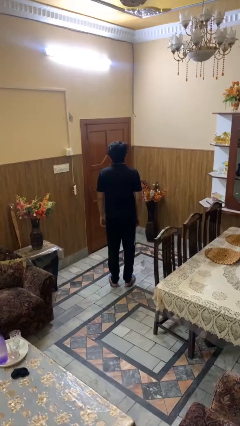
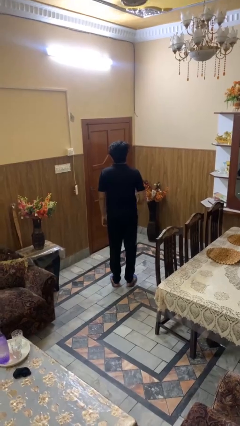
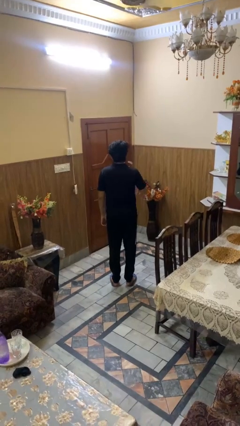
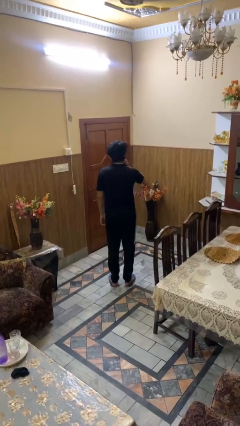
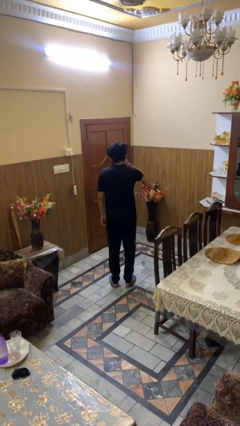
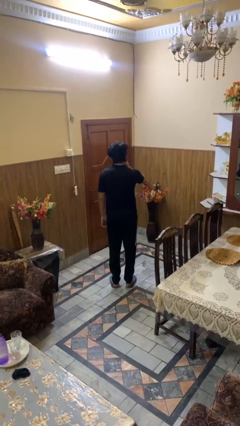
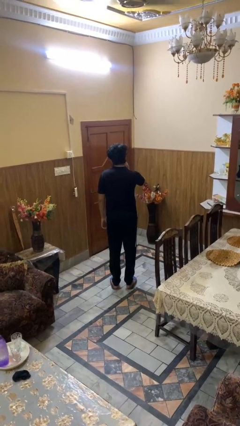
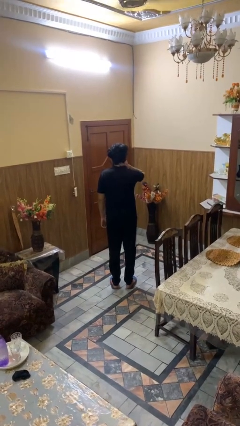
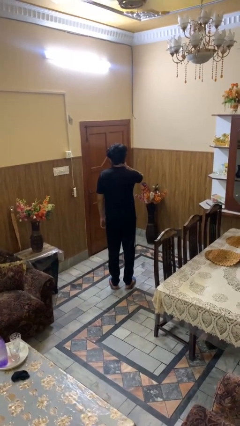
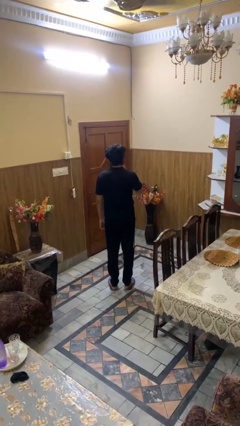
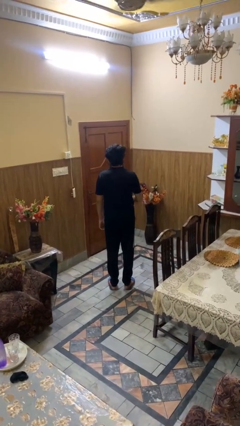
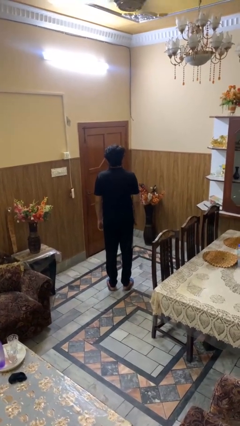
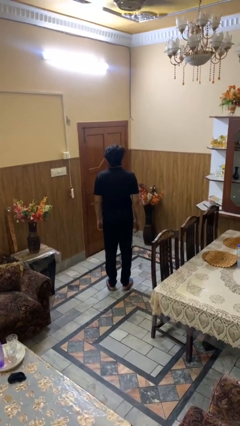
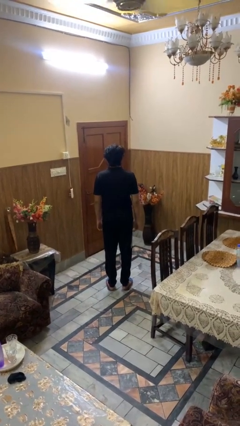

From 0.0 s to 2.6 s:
person rubs neck

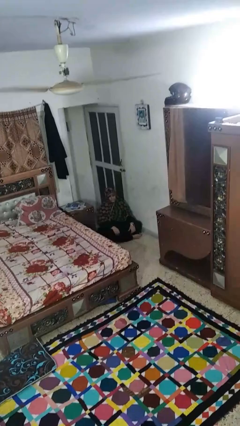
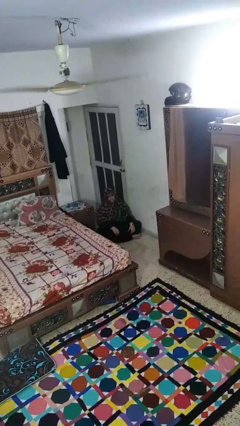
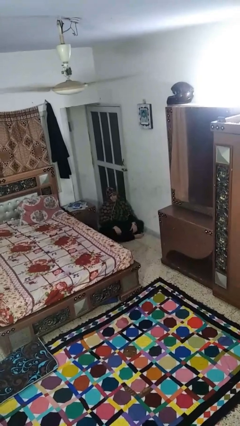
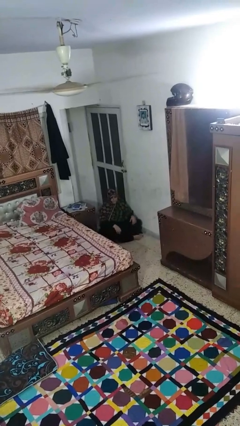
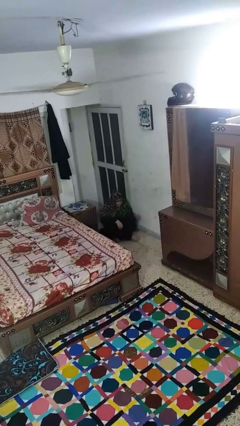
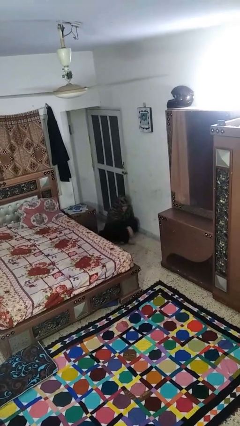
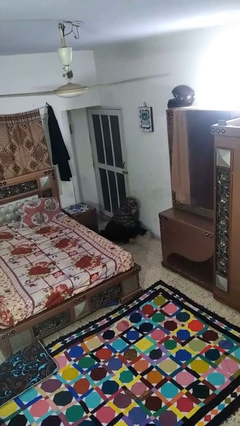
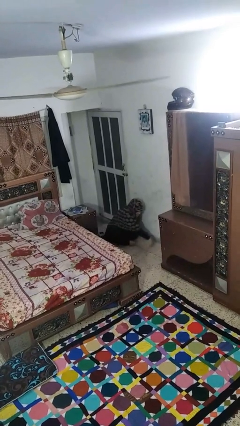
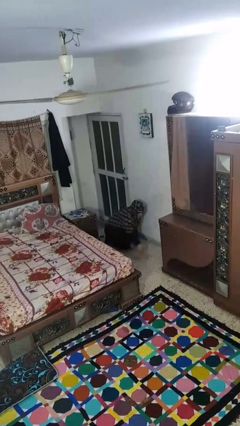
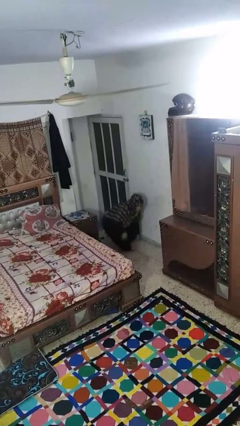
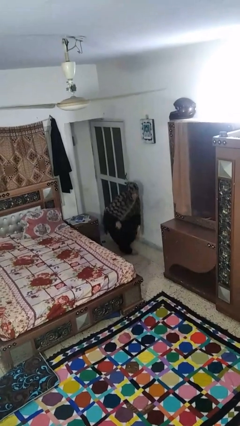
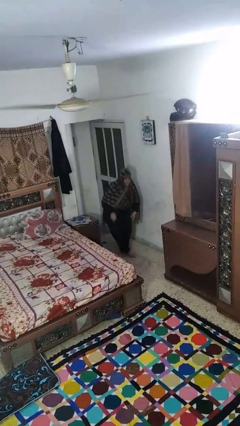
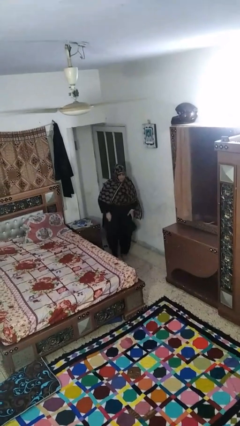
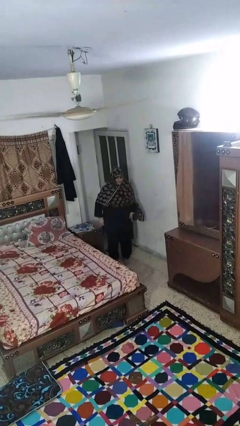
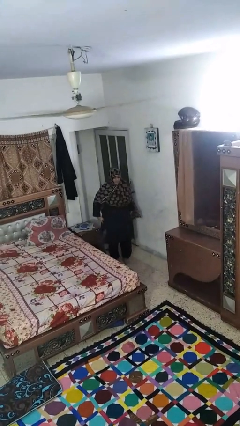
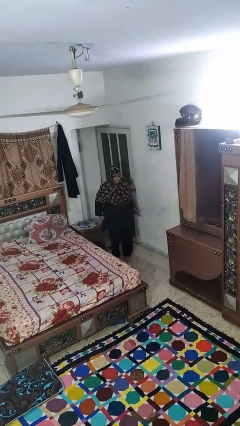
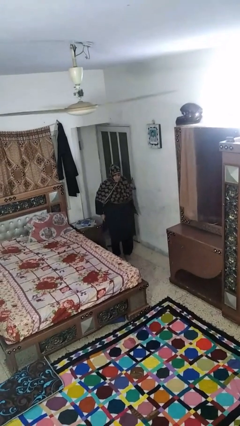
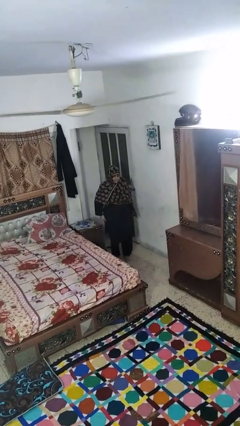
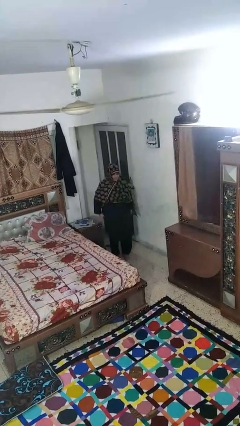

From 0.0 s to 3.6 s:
person stands up from floor

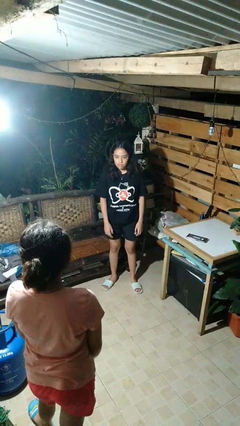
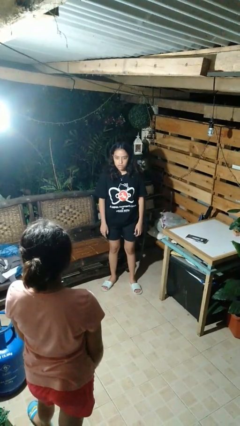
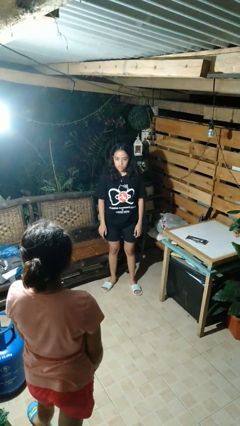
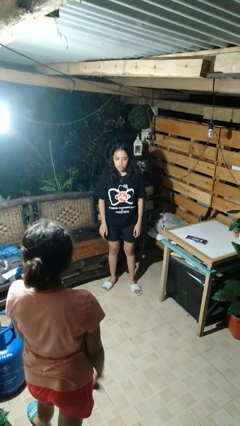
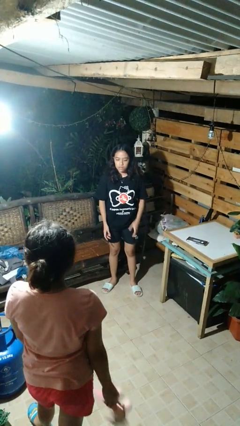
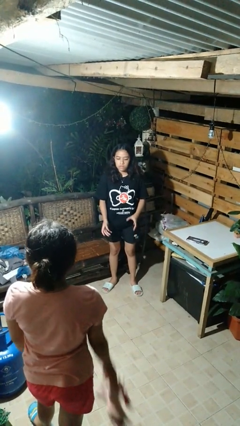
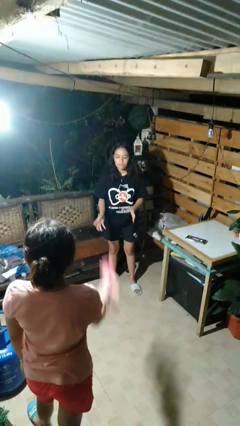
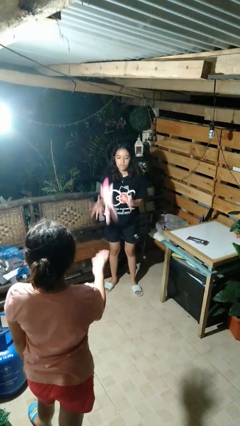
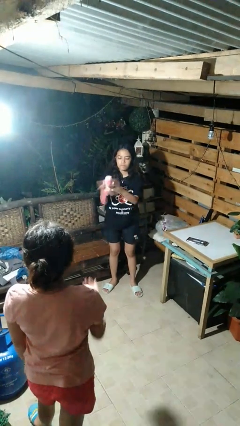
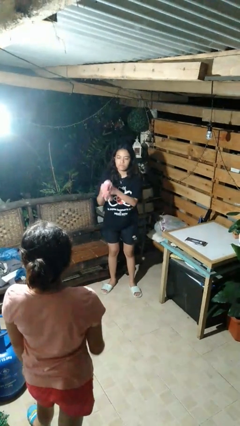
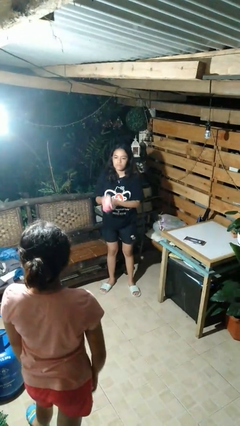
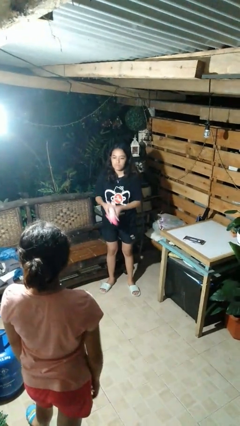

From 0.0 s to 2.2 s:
person catches object from person

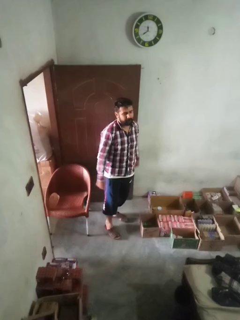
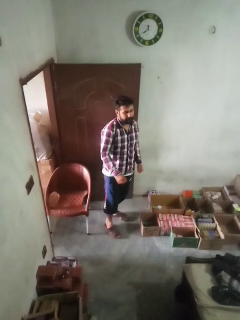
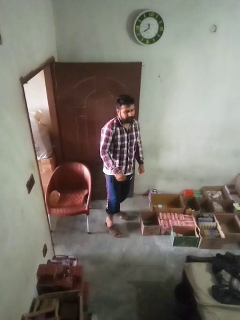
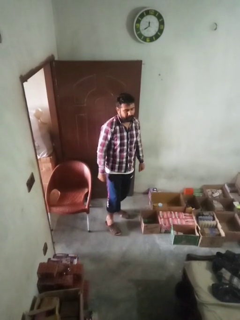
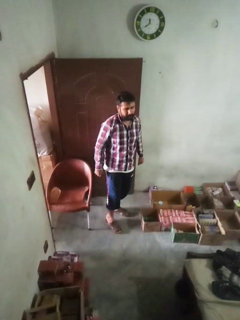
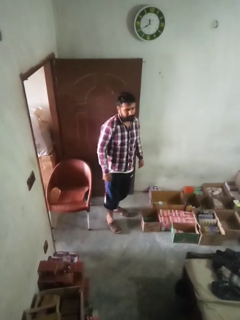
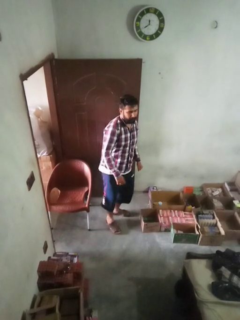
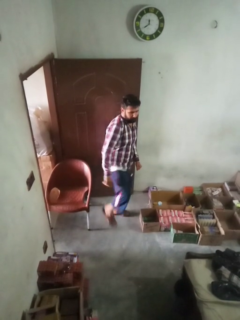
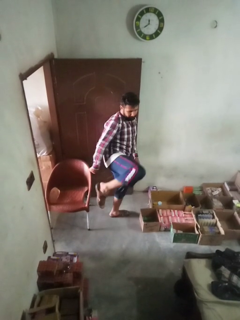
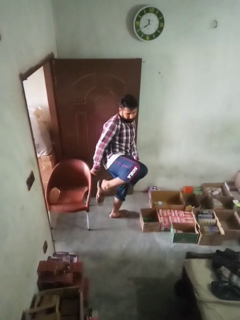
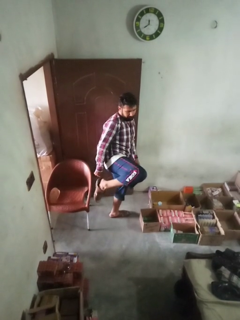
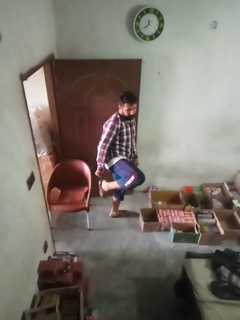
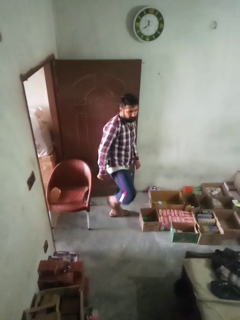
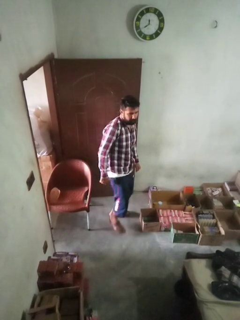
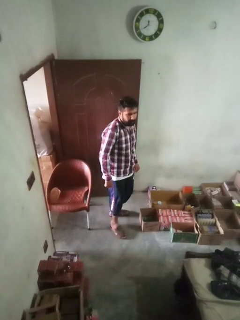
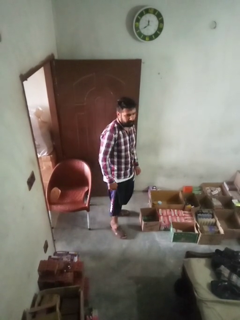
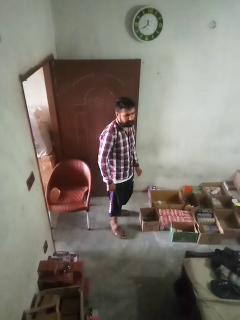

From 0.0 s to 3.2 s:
person karate kicks

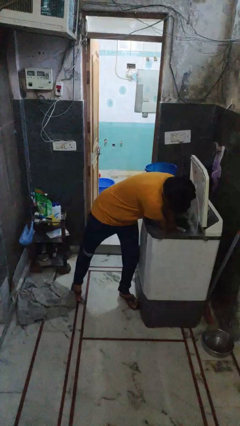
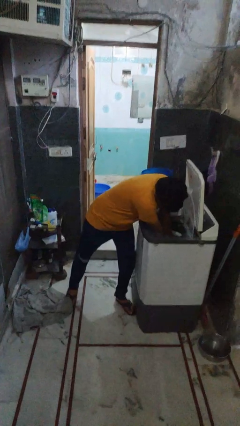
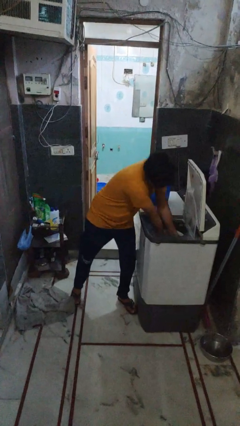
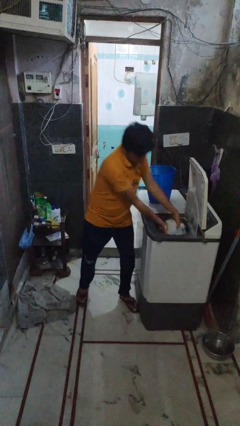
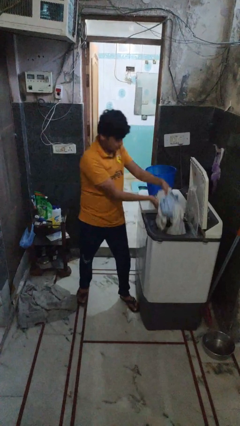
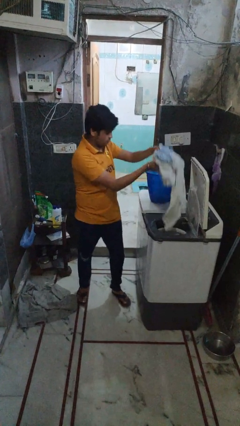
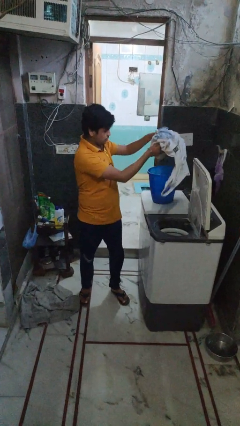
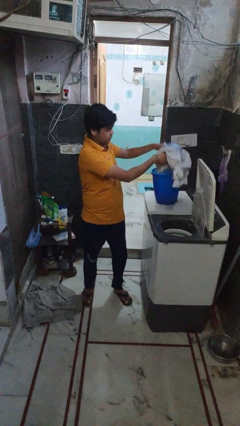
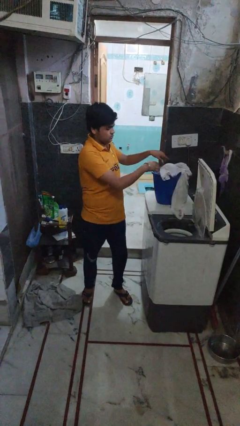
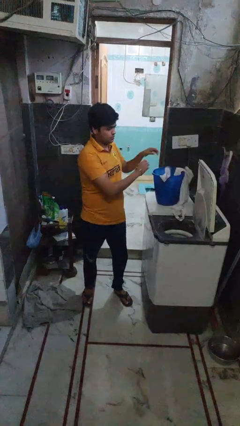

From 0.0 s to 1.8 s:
person unloads clotheswasher

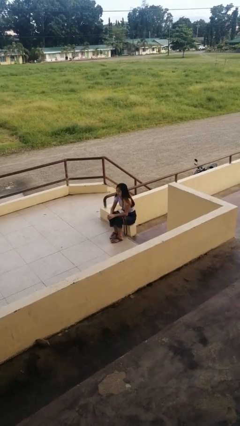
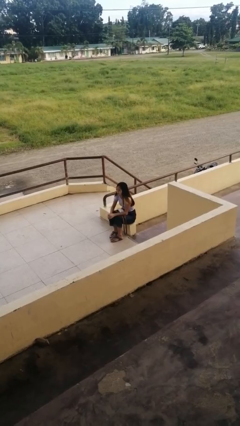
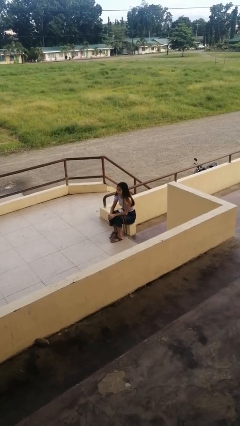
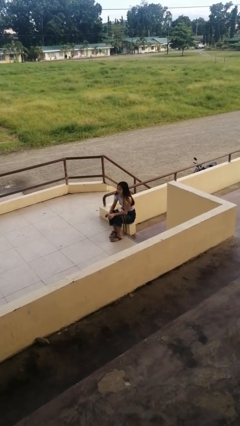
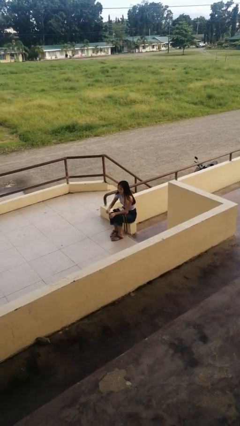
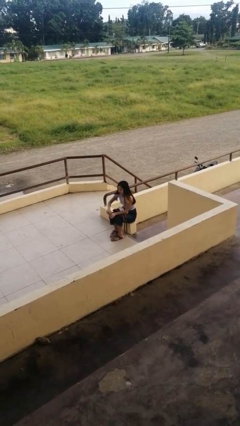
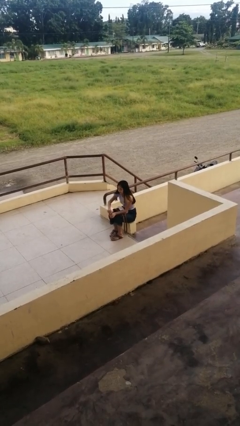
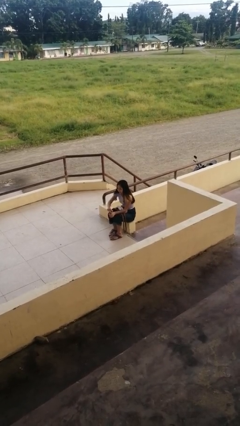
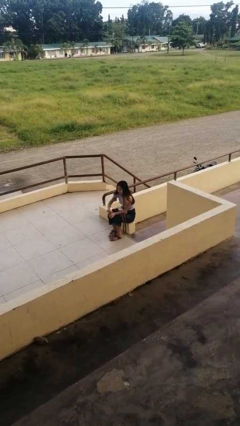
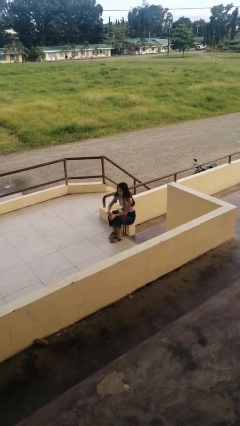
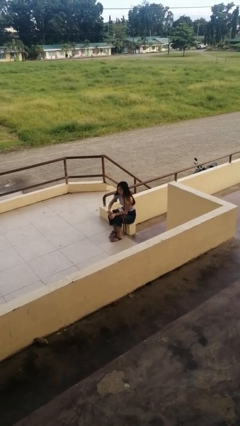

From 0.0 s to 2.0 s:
person opens beverage can

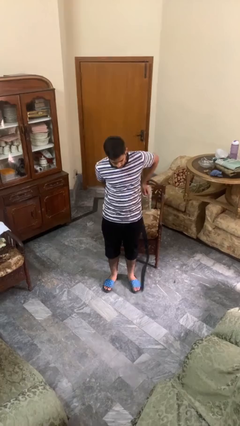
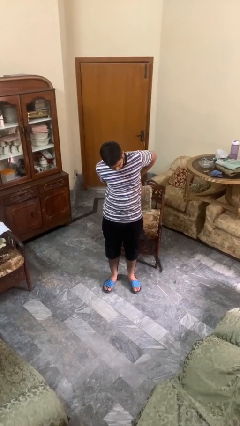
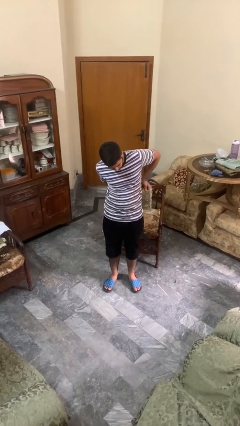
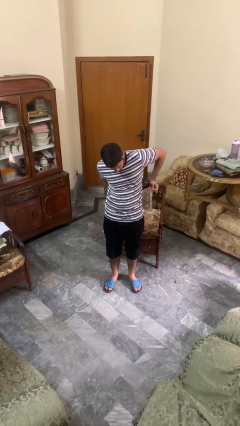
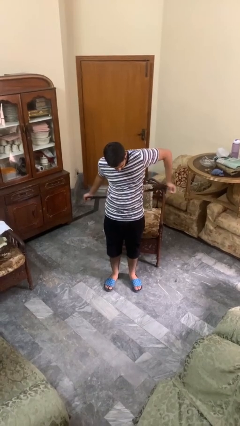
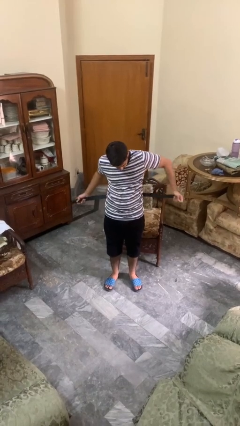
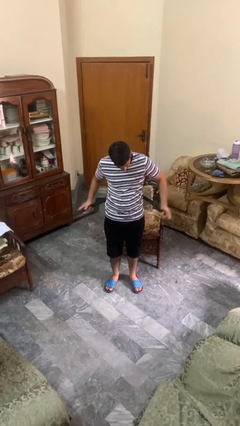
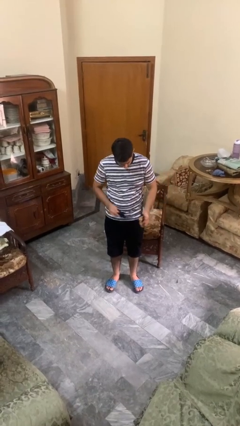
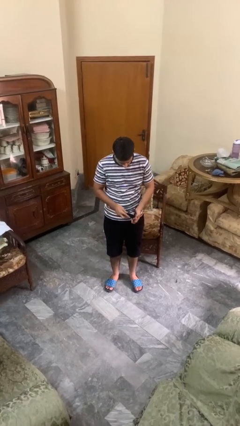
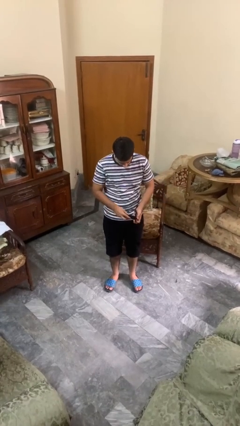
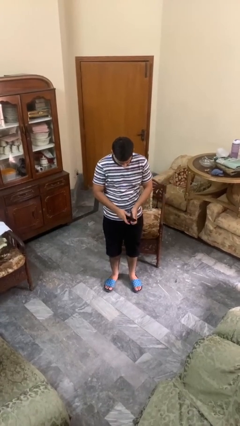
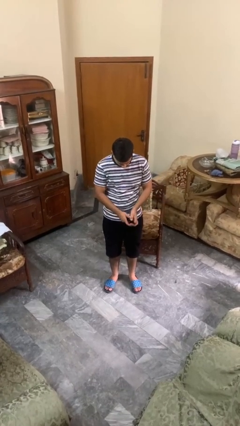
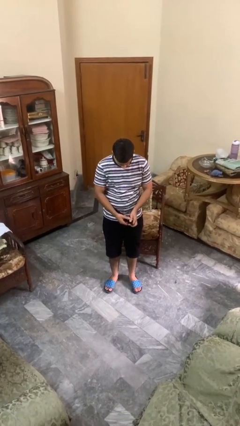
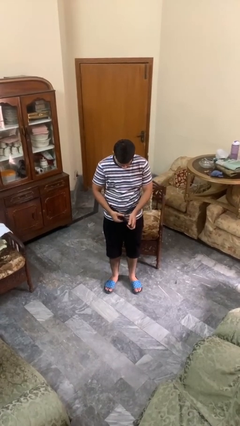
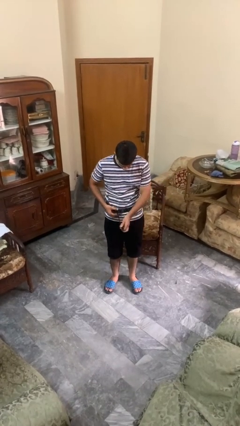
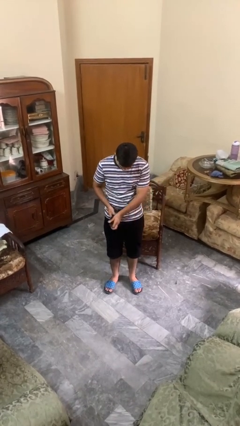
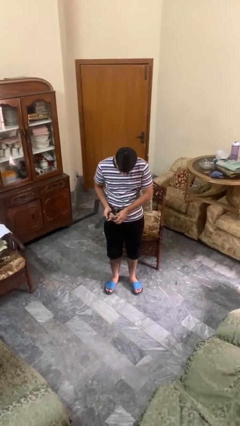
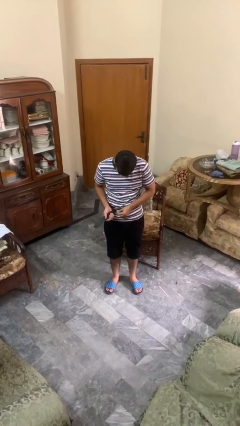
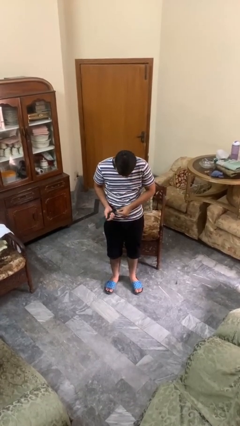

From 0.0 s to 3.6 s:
person puts on belt
